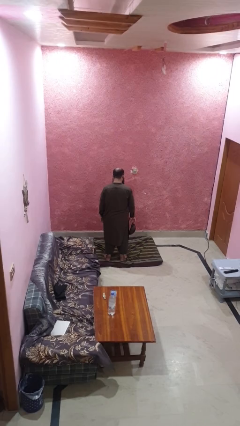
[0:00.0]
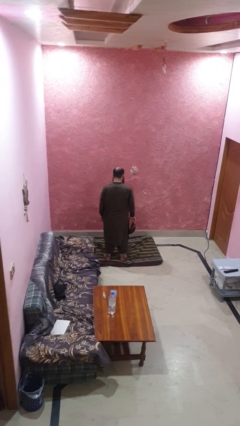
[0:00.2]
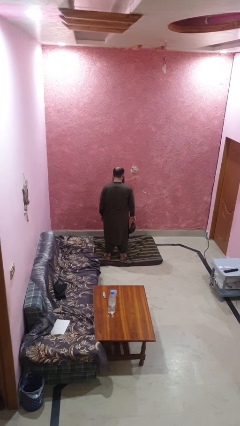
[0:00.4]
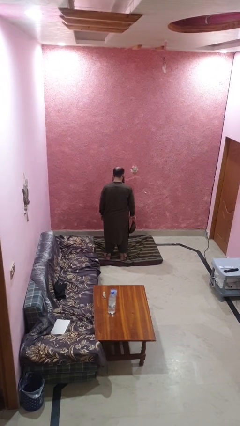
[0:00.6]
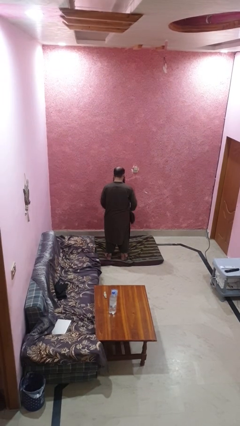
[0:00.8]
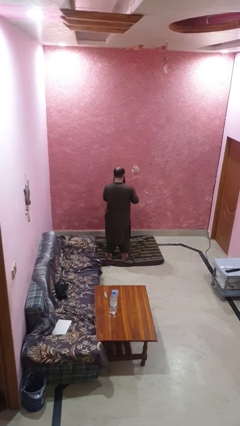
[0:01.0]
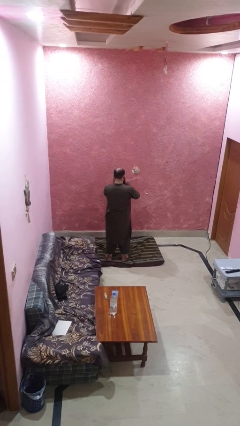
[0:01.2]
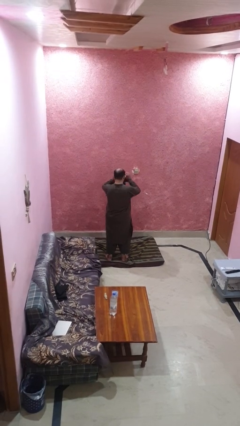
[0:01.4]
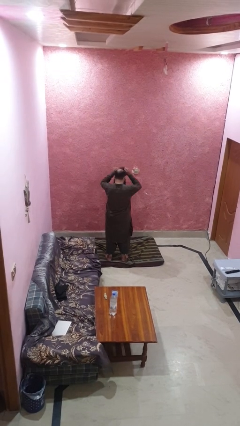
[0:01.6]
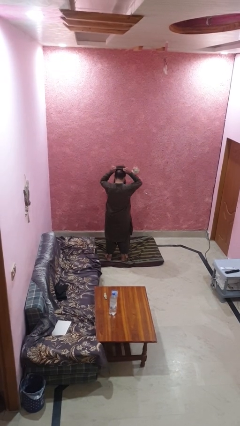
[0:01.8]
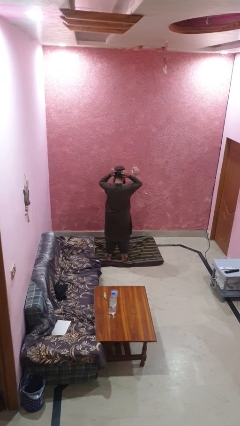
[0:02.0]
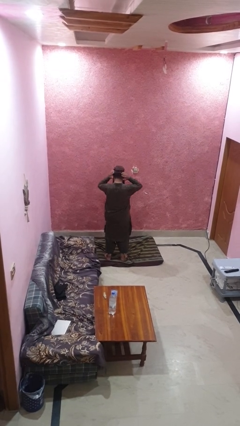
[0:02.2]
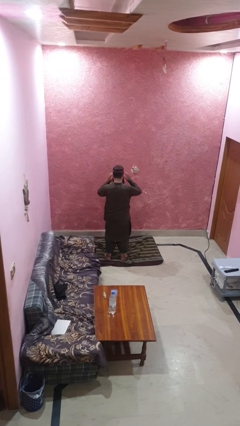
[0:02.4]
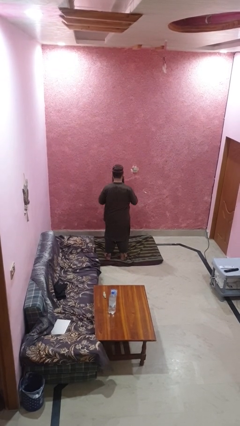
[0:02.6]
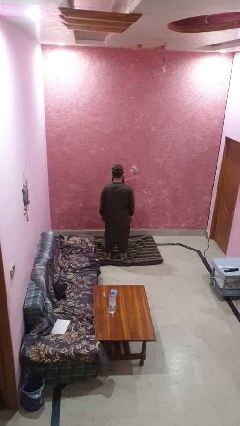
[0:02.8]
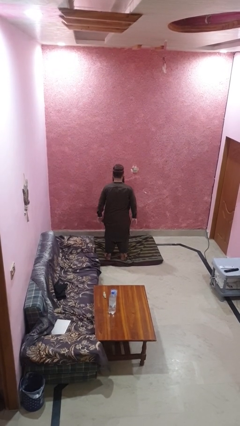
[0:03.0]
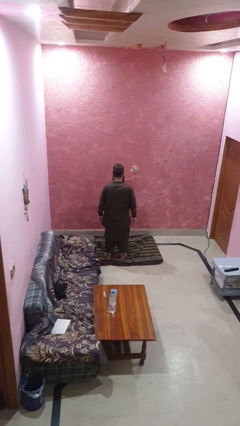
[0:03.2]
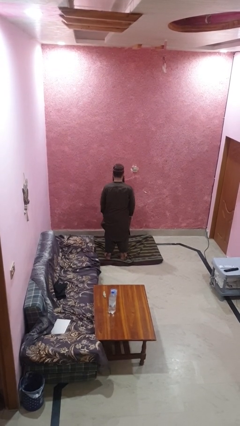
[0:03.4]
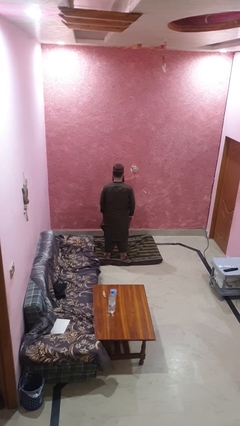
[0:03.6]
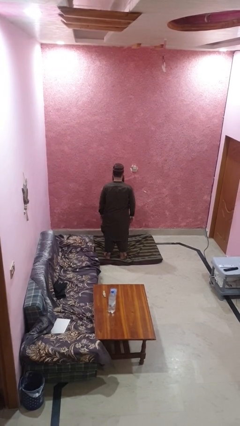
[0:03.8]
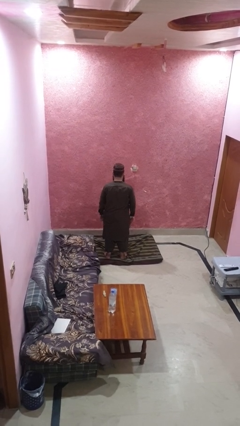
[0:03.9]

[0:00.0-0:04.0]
person puts on hat

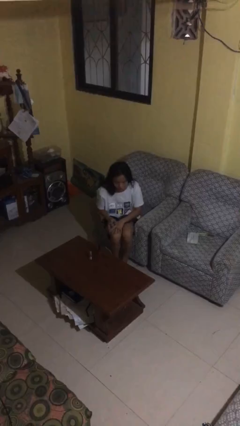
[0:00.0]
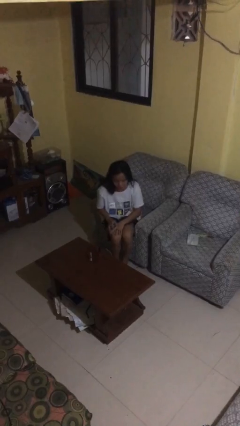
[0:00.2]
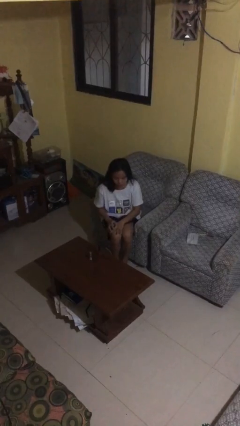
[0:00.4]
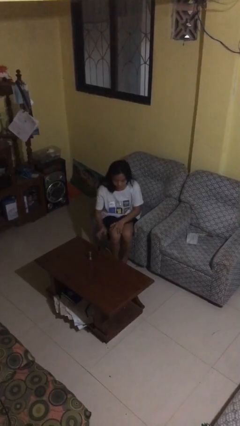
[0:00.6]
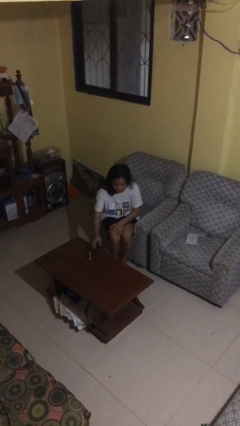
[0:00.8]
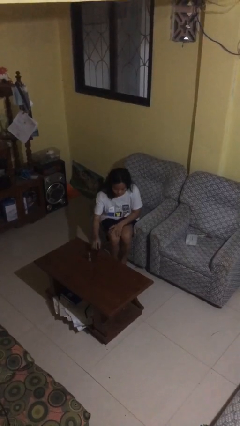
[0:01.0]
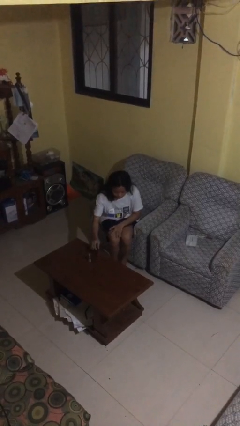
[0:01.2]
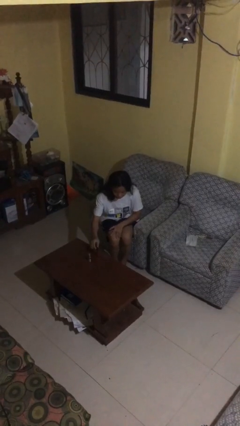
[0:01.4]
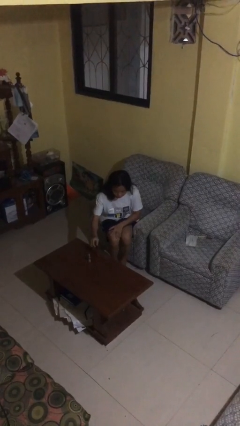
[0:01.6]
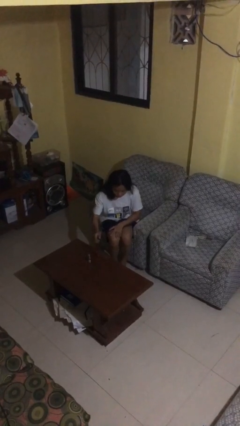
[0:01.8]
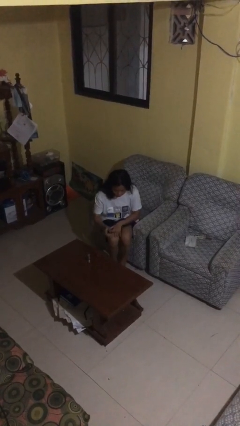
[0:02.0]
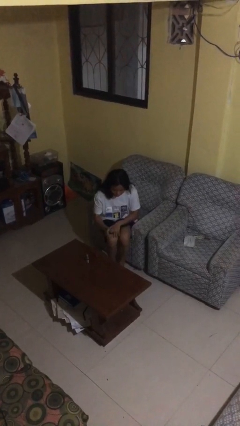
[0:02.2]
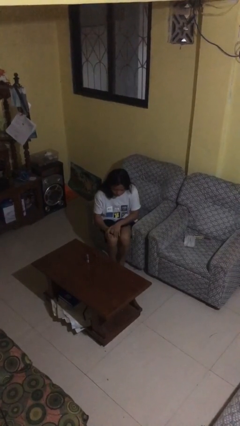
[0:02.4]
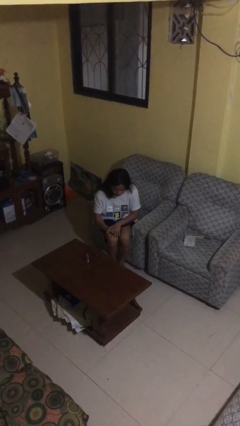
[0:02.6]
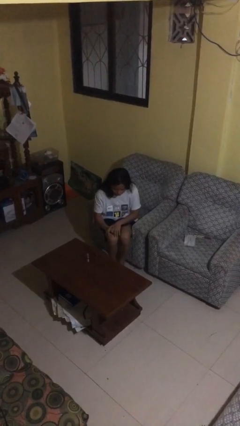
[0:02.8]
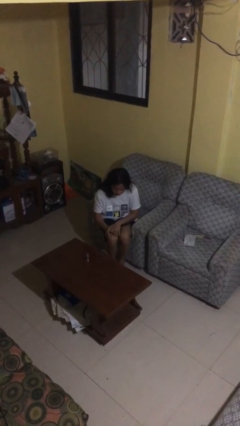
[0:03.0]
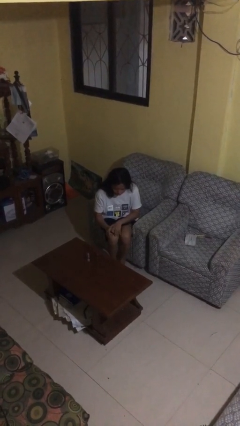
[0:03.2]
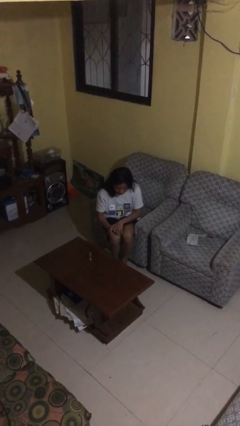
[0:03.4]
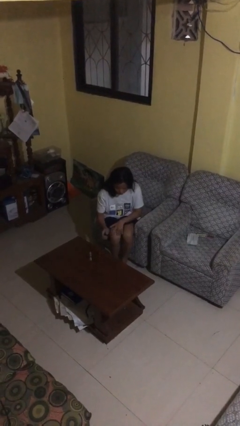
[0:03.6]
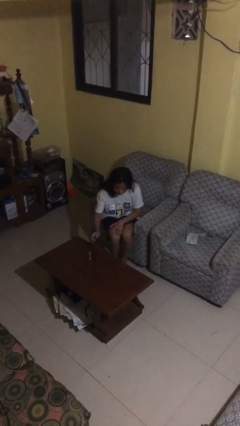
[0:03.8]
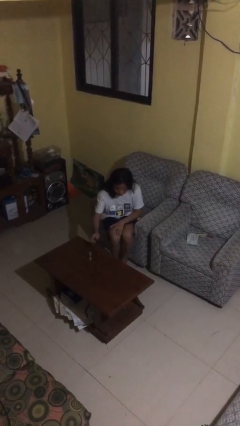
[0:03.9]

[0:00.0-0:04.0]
person paints fingernails

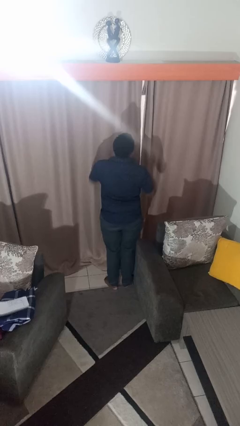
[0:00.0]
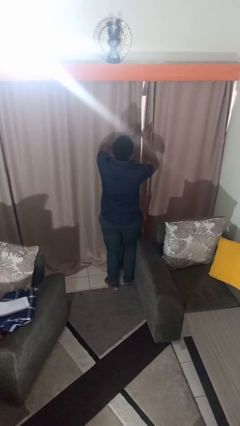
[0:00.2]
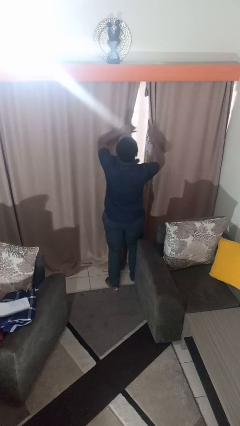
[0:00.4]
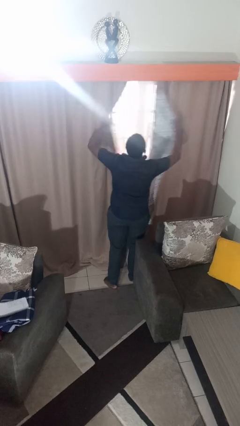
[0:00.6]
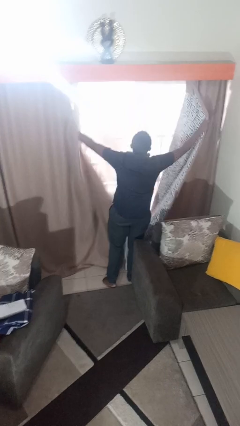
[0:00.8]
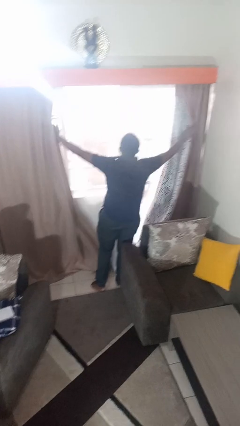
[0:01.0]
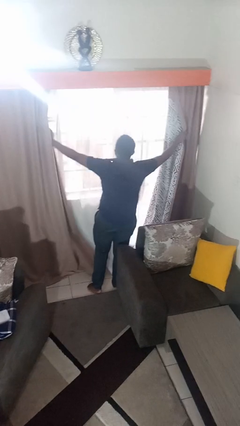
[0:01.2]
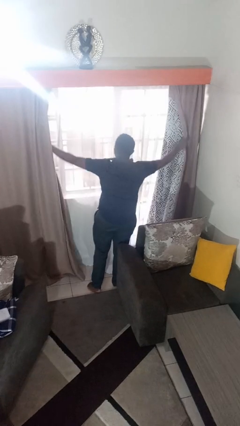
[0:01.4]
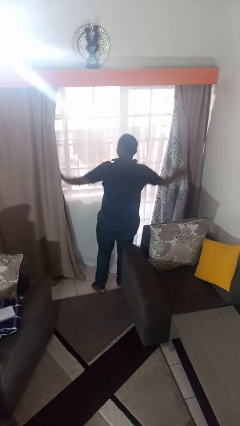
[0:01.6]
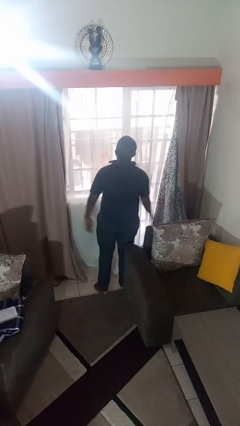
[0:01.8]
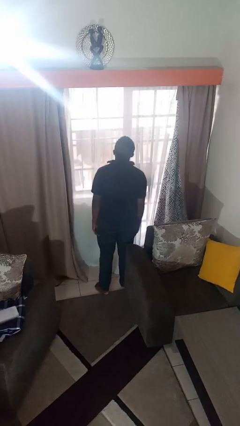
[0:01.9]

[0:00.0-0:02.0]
person opens curtains

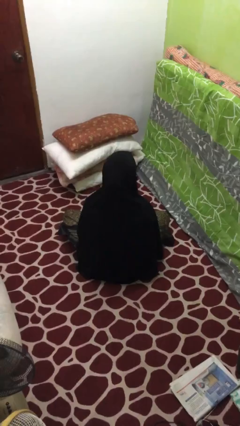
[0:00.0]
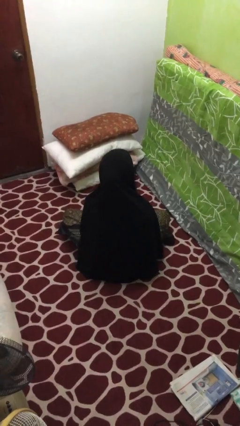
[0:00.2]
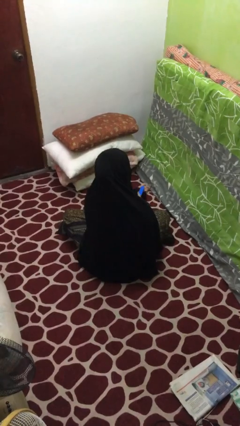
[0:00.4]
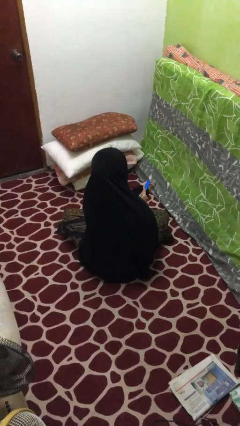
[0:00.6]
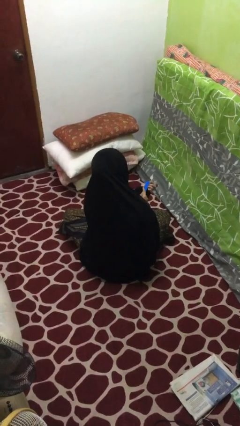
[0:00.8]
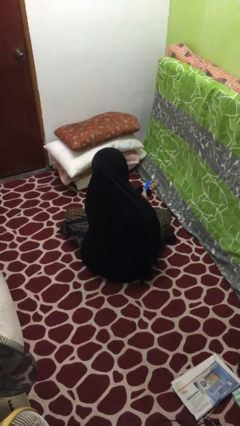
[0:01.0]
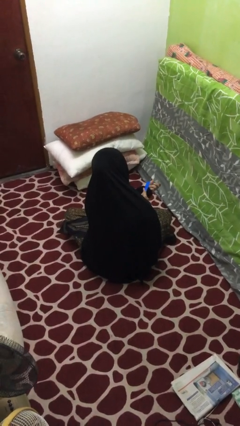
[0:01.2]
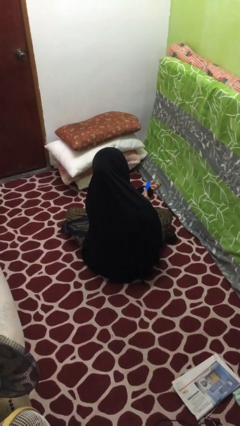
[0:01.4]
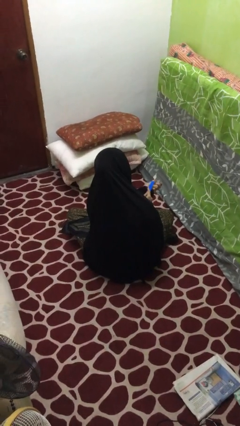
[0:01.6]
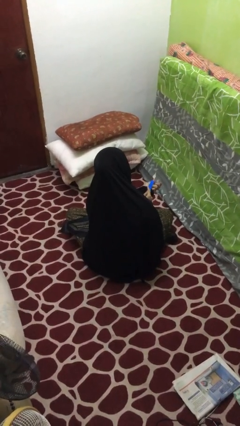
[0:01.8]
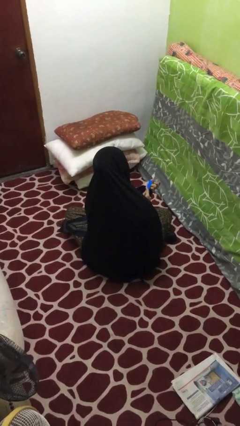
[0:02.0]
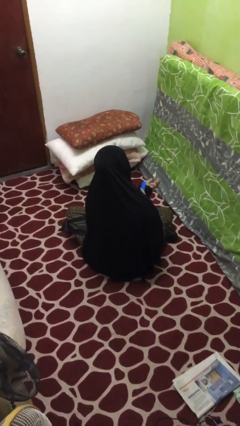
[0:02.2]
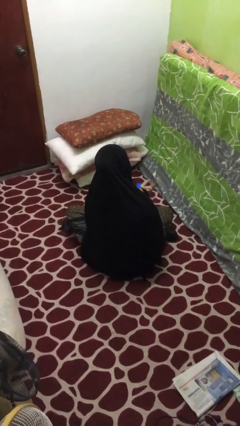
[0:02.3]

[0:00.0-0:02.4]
person files fingernails

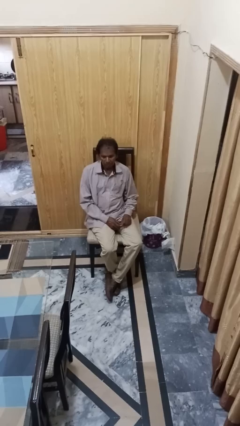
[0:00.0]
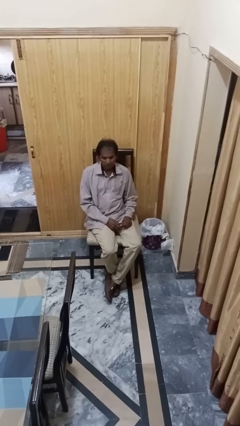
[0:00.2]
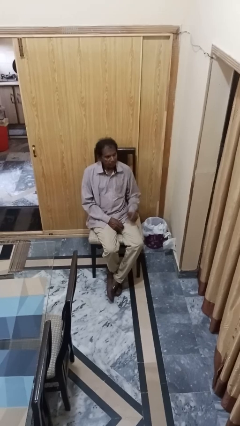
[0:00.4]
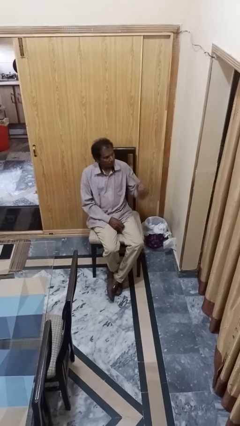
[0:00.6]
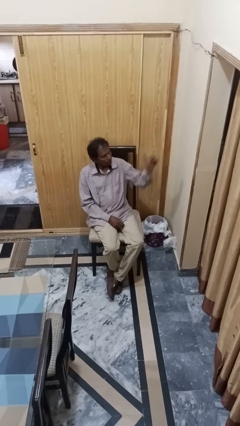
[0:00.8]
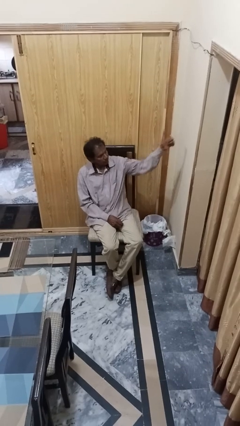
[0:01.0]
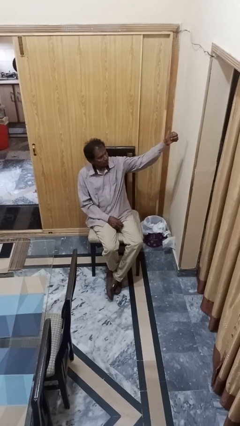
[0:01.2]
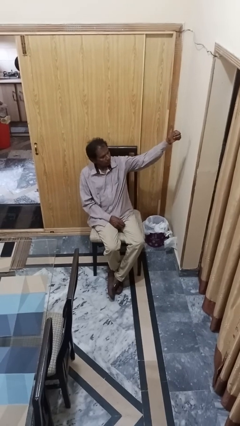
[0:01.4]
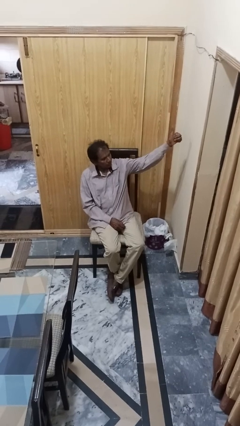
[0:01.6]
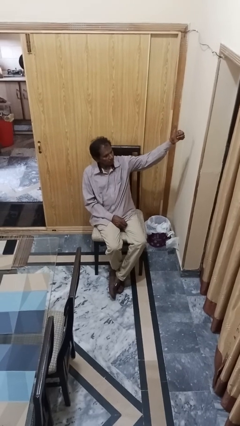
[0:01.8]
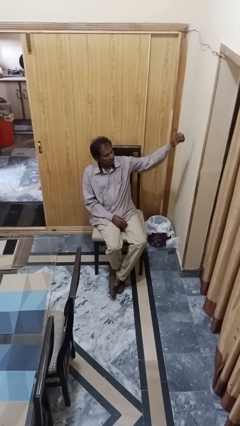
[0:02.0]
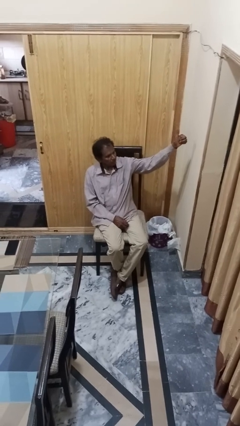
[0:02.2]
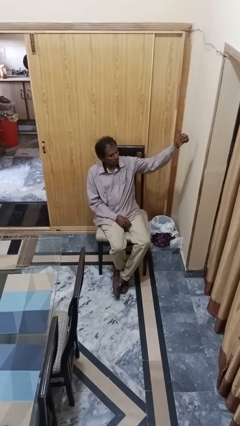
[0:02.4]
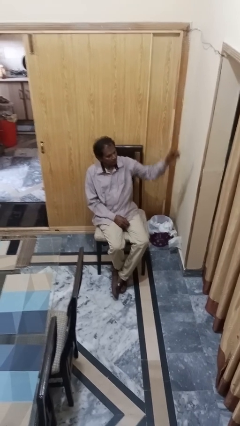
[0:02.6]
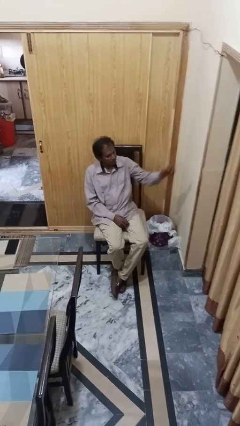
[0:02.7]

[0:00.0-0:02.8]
person gestures thumbs up

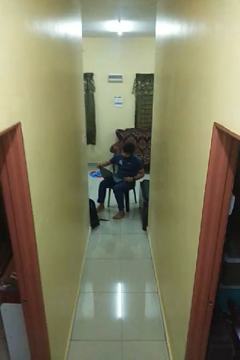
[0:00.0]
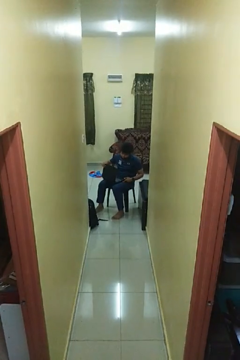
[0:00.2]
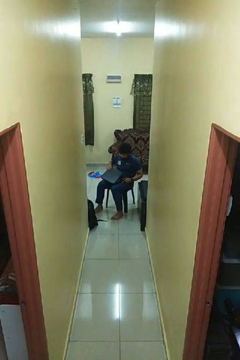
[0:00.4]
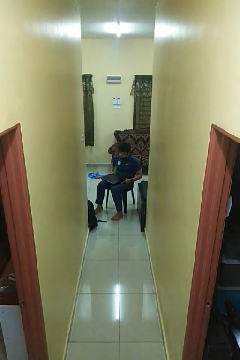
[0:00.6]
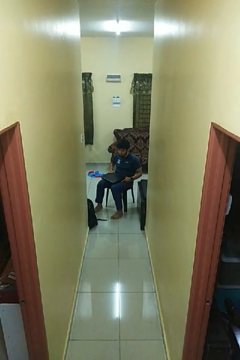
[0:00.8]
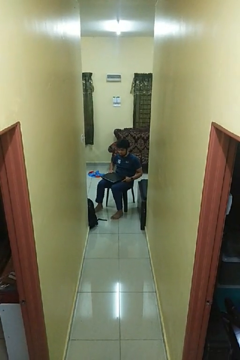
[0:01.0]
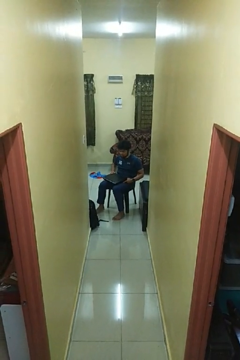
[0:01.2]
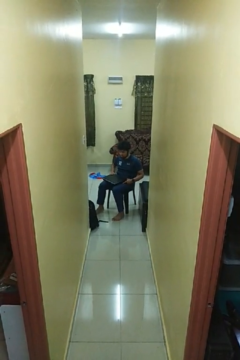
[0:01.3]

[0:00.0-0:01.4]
person closes laptop

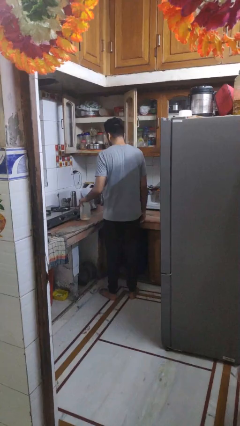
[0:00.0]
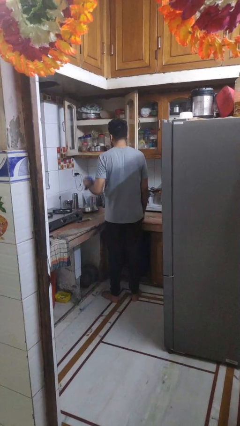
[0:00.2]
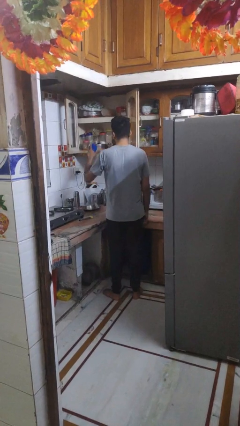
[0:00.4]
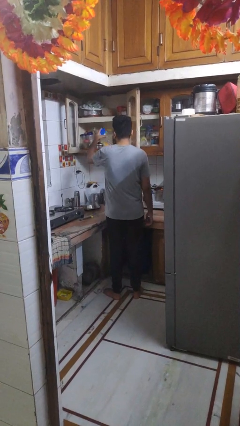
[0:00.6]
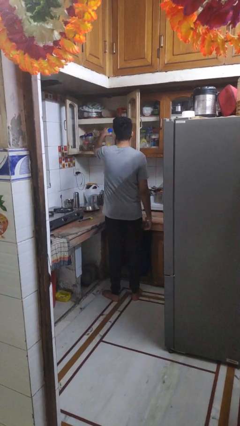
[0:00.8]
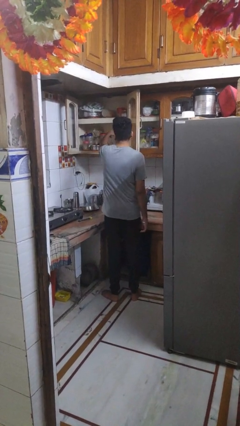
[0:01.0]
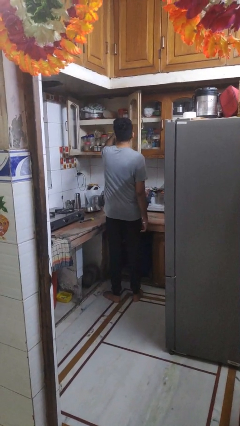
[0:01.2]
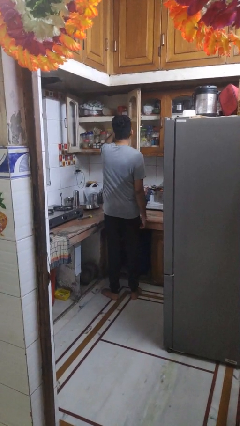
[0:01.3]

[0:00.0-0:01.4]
person puts object in cabinet
